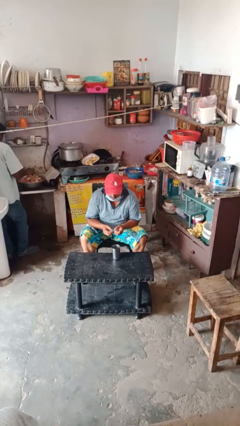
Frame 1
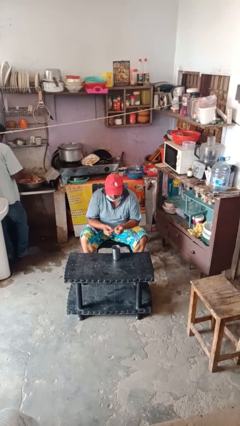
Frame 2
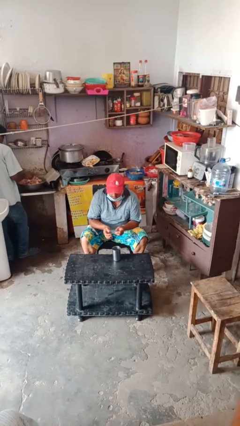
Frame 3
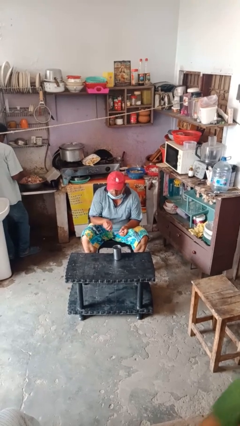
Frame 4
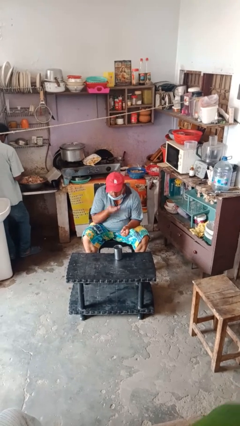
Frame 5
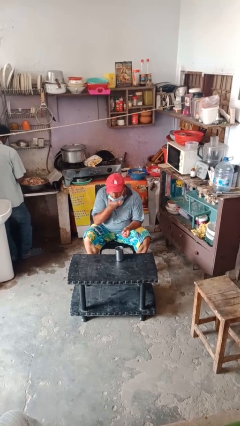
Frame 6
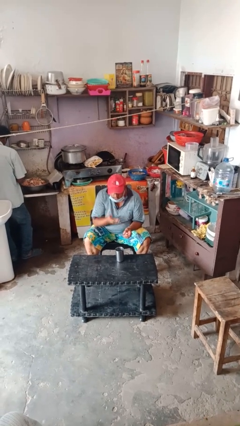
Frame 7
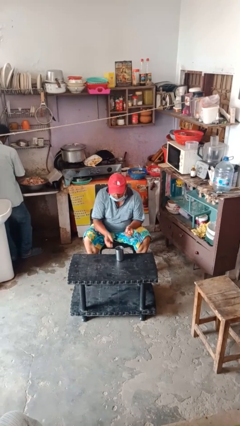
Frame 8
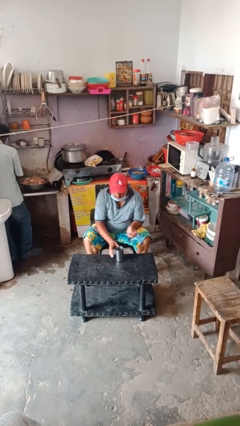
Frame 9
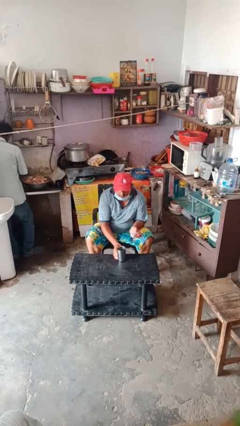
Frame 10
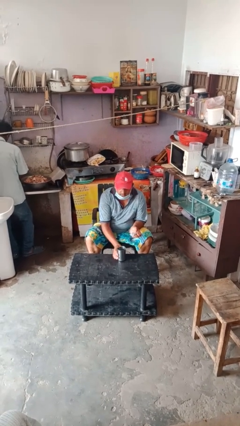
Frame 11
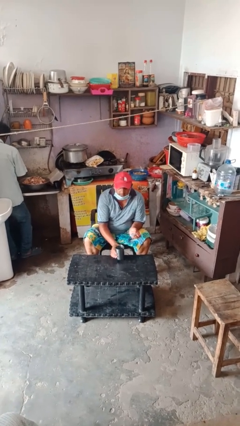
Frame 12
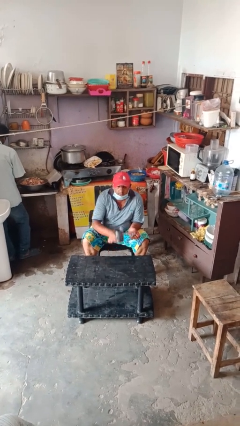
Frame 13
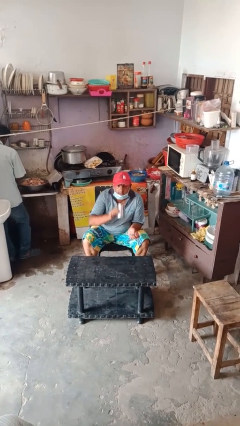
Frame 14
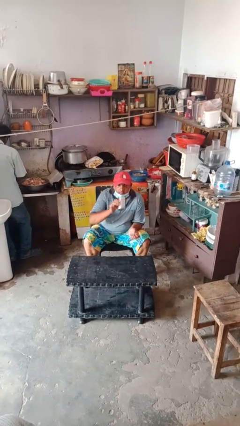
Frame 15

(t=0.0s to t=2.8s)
person takes medicine pills

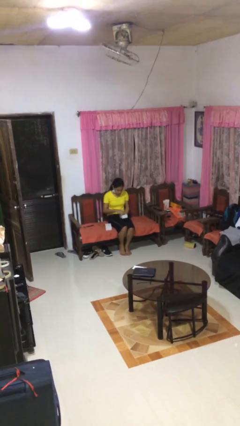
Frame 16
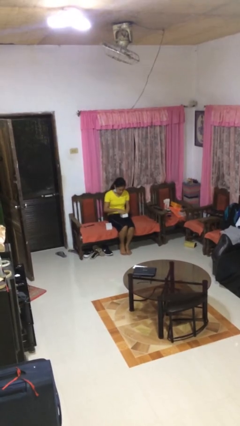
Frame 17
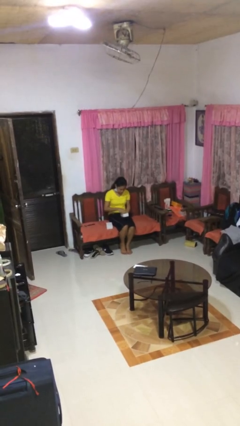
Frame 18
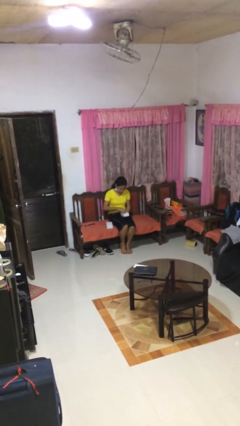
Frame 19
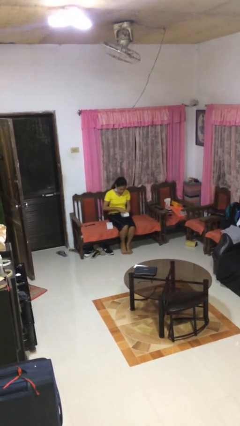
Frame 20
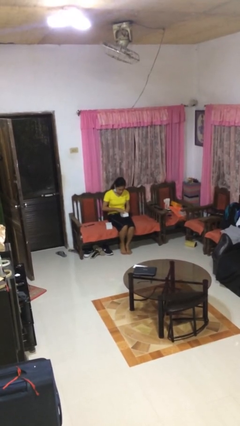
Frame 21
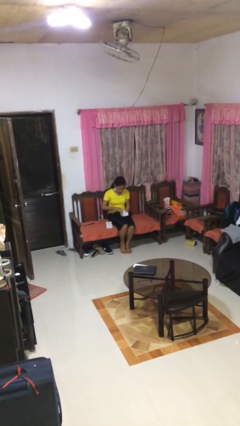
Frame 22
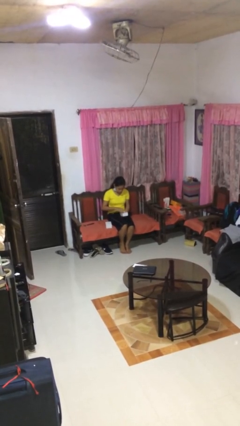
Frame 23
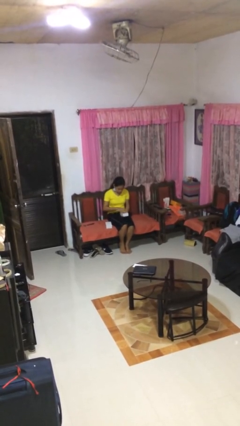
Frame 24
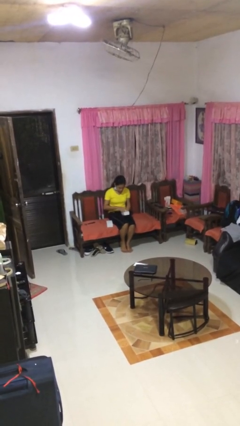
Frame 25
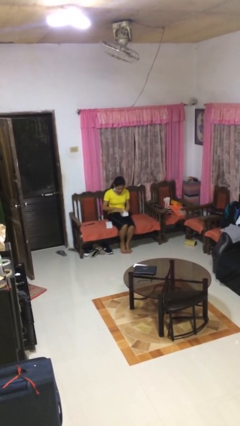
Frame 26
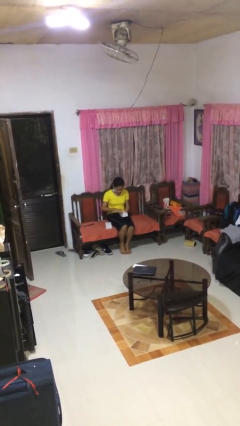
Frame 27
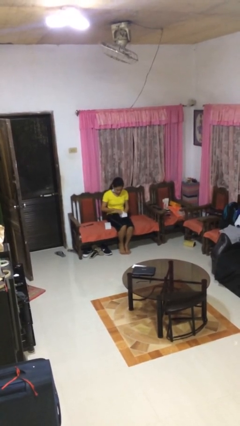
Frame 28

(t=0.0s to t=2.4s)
person searches jewelry box

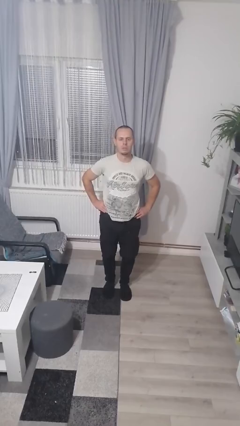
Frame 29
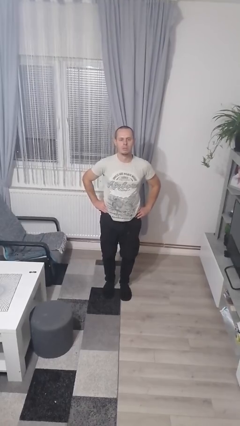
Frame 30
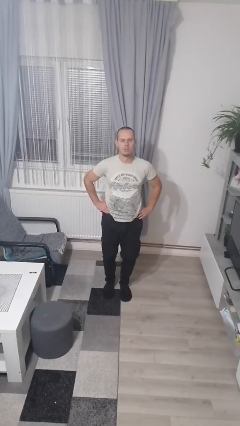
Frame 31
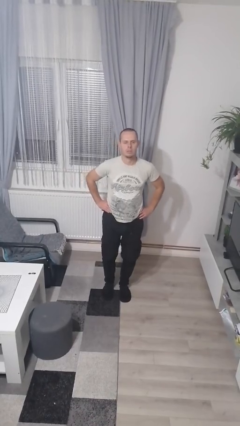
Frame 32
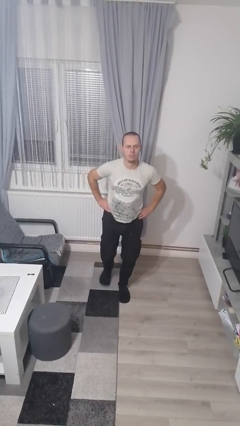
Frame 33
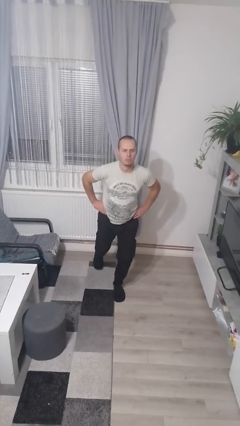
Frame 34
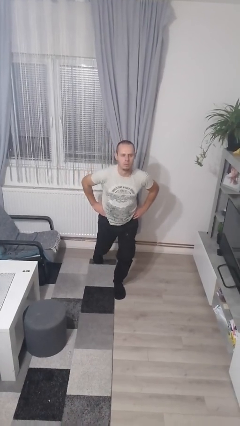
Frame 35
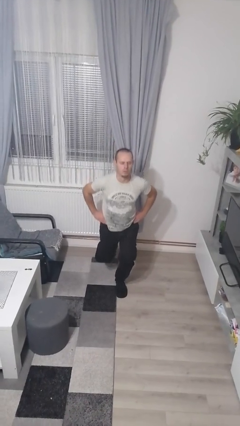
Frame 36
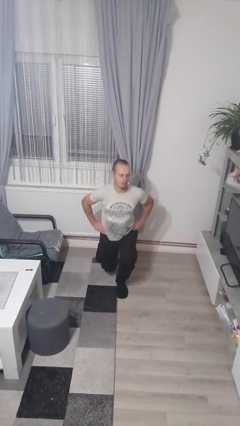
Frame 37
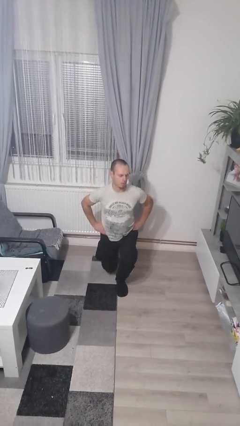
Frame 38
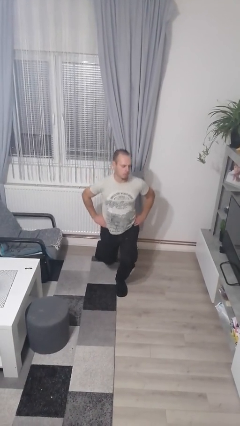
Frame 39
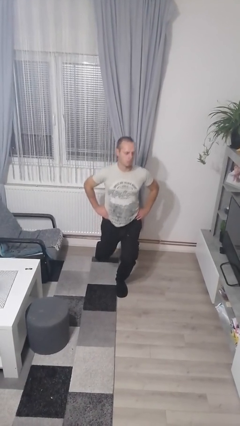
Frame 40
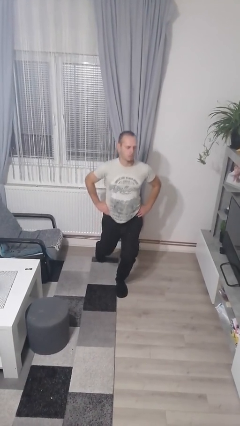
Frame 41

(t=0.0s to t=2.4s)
person exercises with lunges

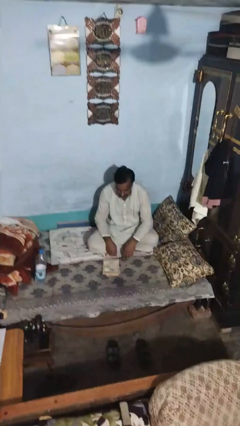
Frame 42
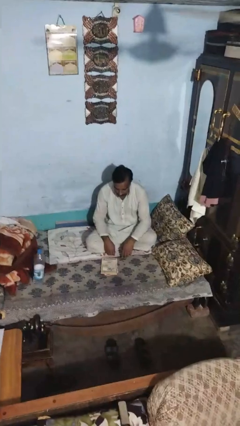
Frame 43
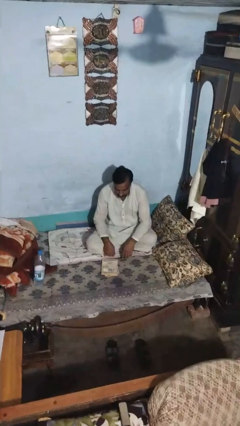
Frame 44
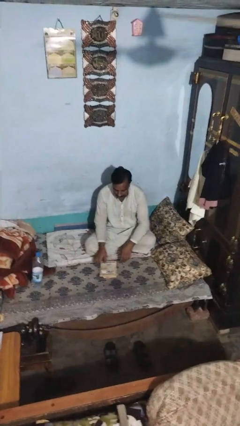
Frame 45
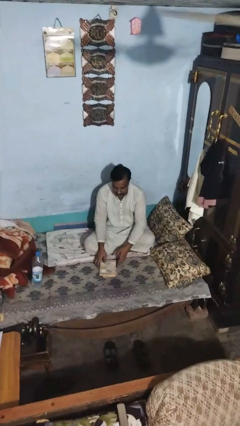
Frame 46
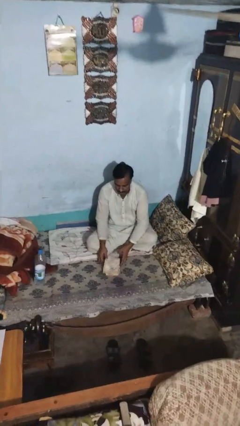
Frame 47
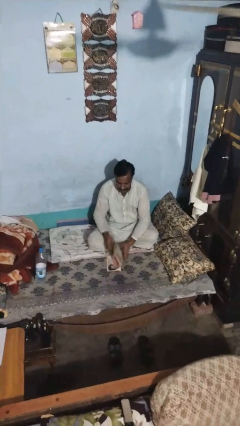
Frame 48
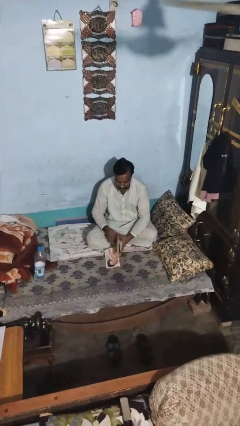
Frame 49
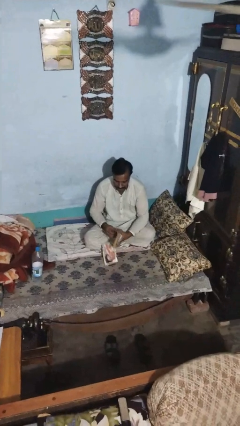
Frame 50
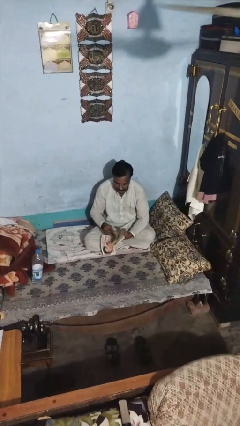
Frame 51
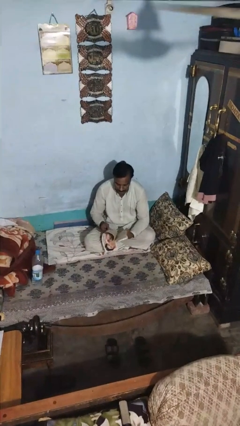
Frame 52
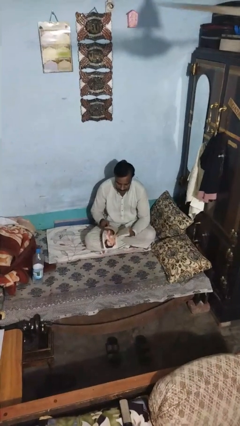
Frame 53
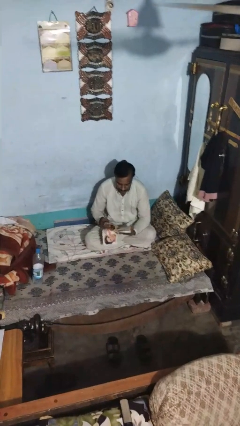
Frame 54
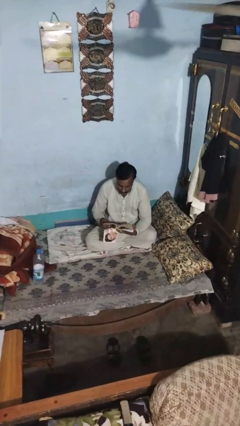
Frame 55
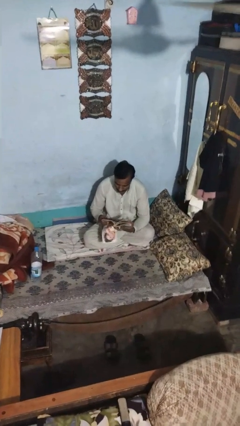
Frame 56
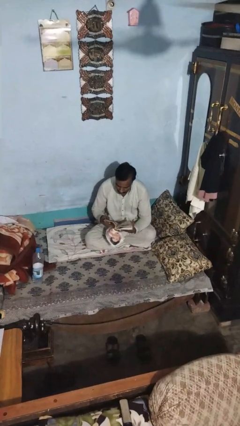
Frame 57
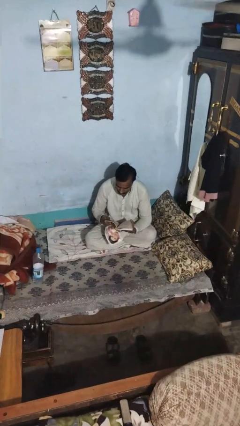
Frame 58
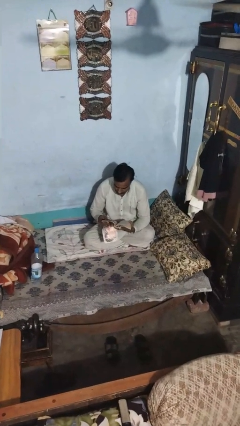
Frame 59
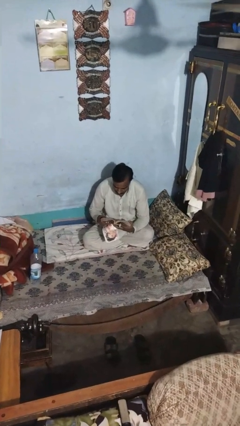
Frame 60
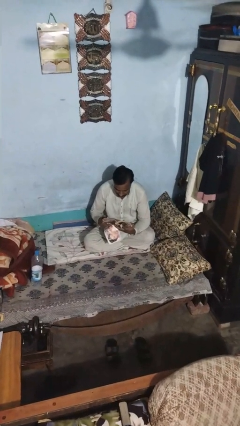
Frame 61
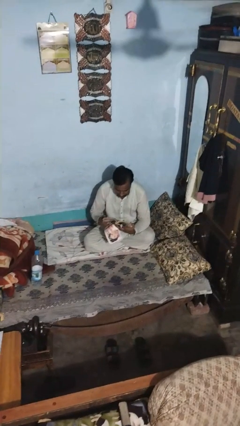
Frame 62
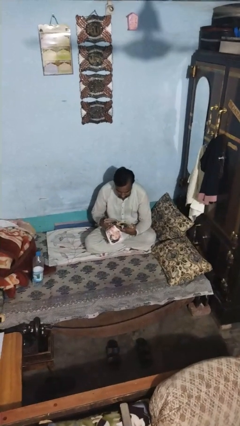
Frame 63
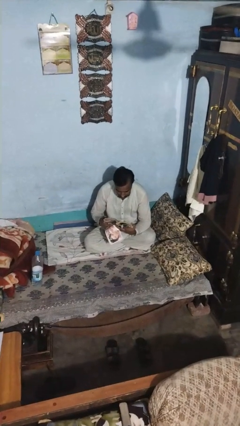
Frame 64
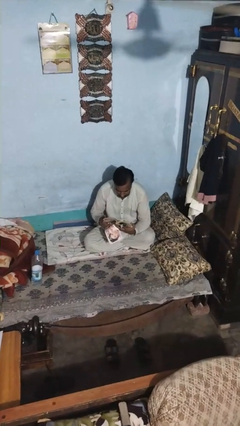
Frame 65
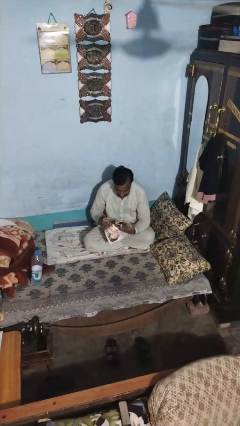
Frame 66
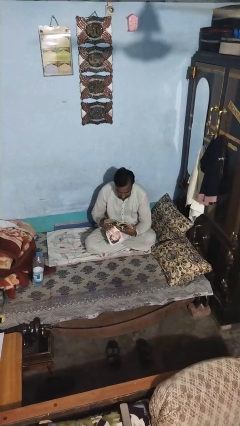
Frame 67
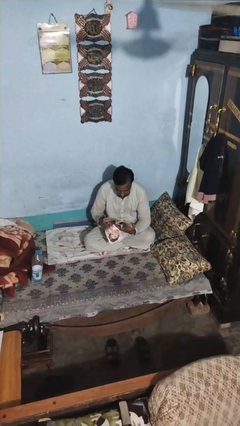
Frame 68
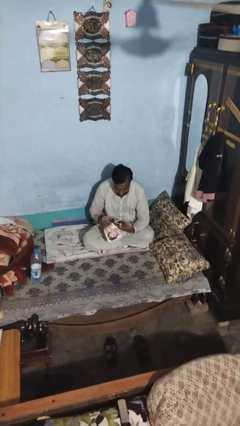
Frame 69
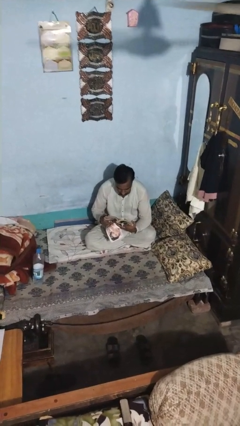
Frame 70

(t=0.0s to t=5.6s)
person reads magazine

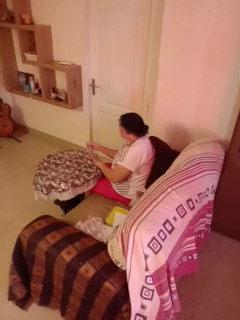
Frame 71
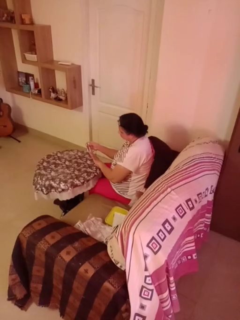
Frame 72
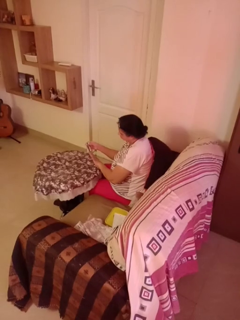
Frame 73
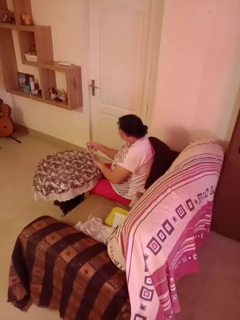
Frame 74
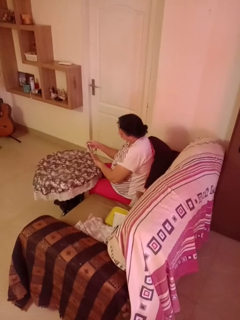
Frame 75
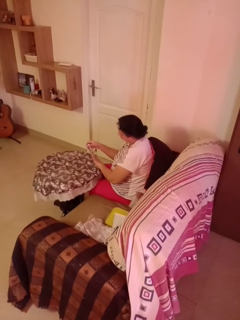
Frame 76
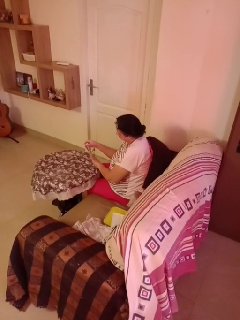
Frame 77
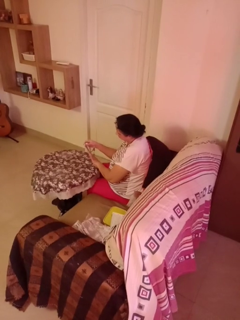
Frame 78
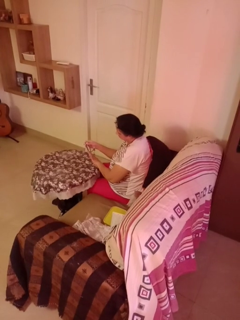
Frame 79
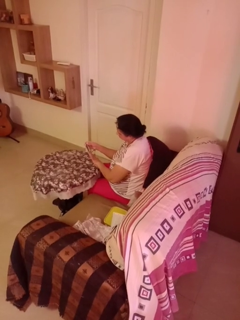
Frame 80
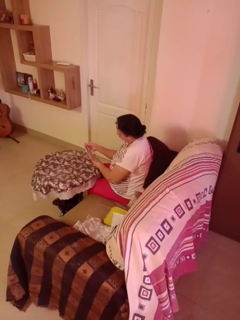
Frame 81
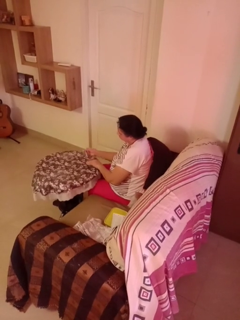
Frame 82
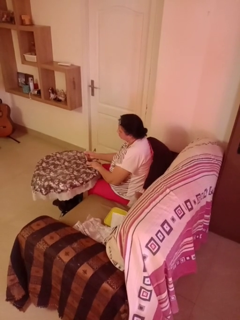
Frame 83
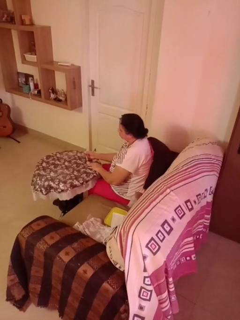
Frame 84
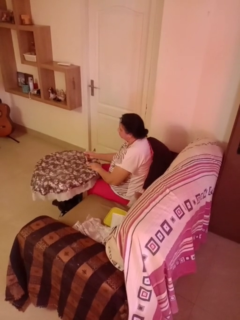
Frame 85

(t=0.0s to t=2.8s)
person clips fingernails

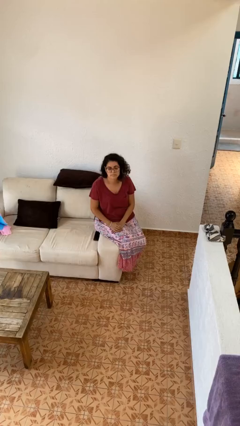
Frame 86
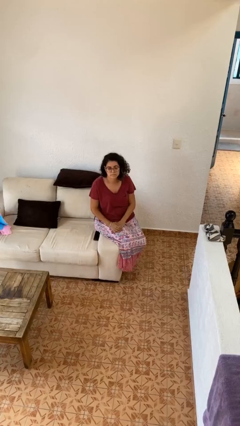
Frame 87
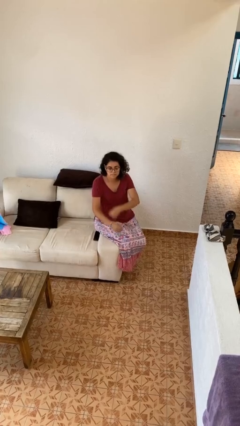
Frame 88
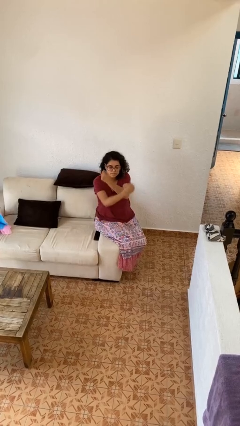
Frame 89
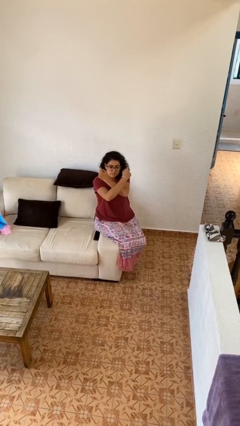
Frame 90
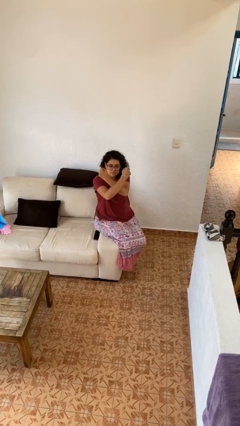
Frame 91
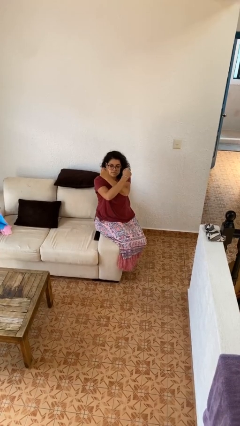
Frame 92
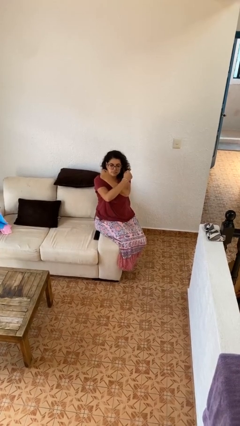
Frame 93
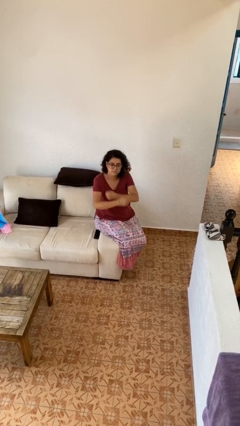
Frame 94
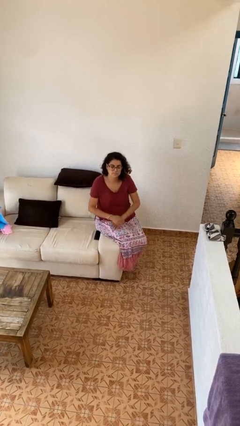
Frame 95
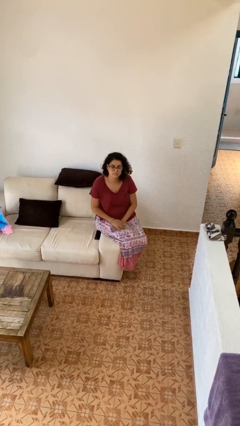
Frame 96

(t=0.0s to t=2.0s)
person gestures arms x
